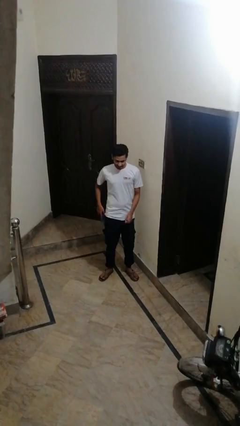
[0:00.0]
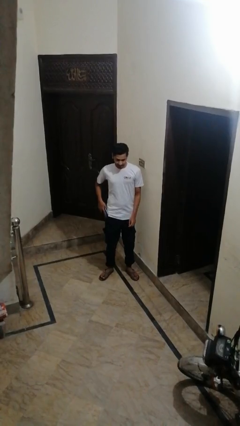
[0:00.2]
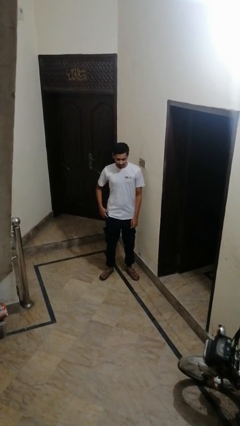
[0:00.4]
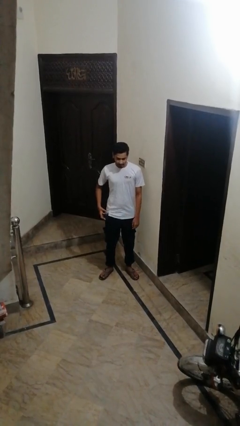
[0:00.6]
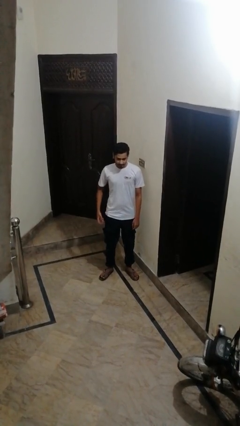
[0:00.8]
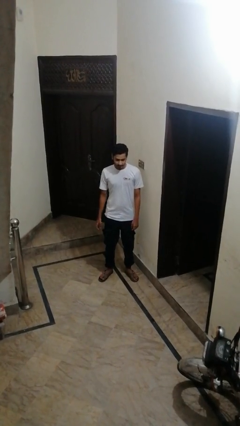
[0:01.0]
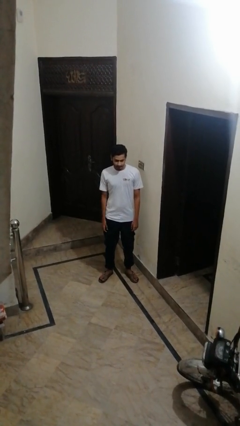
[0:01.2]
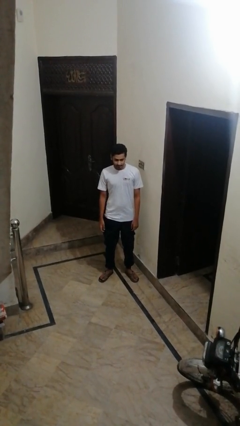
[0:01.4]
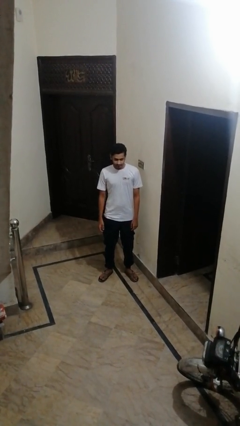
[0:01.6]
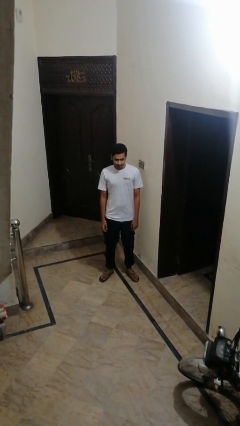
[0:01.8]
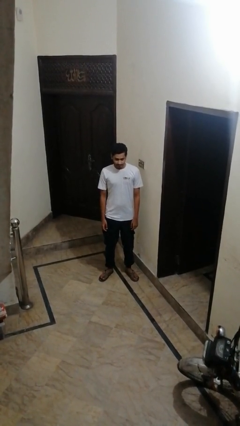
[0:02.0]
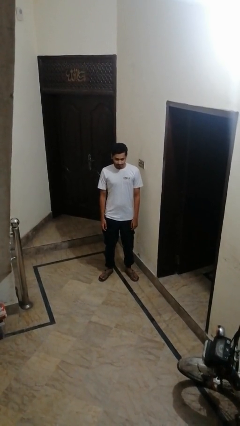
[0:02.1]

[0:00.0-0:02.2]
person shoves person

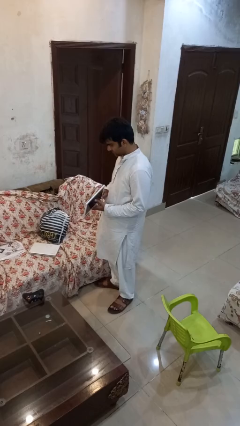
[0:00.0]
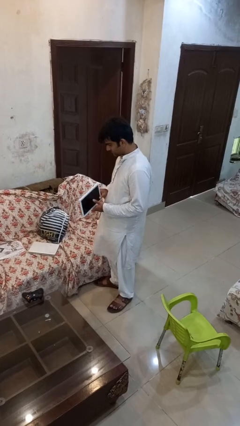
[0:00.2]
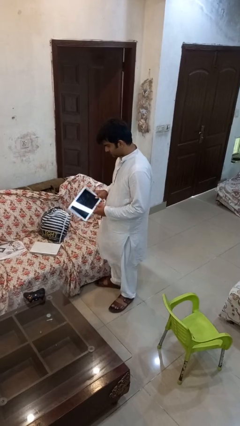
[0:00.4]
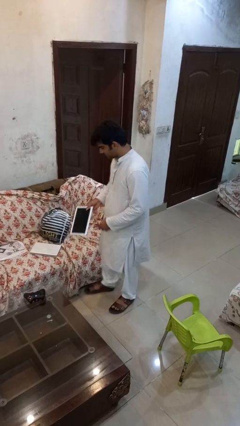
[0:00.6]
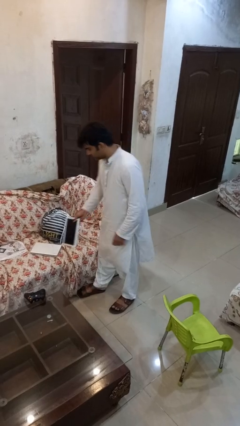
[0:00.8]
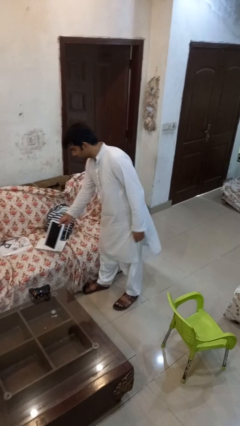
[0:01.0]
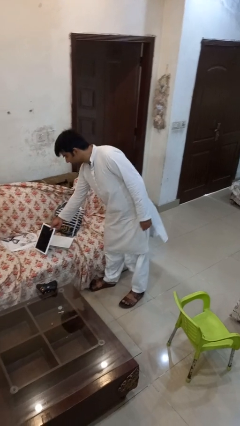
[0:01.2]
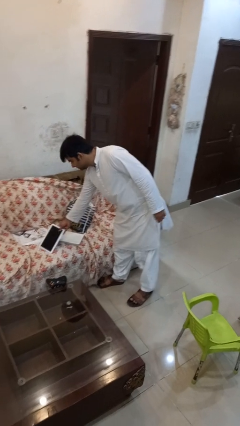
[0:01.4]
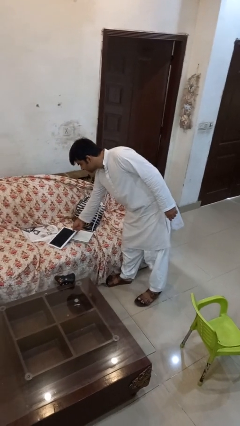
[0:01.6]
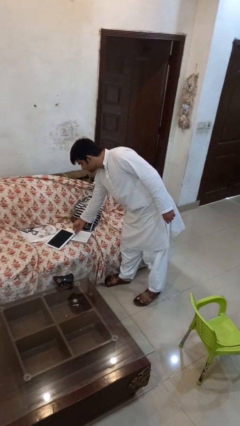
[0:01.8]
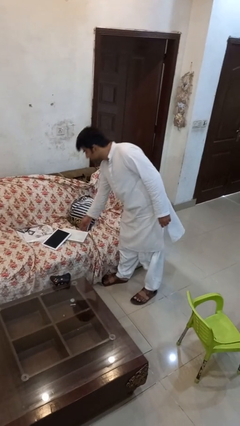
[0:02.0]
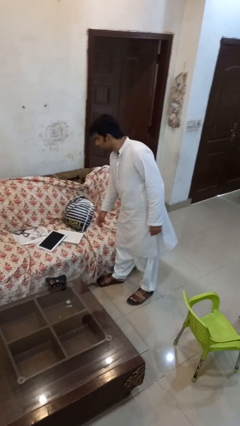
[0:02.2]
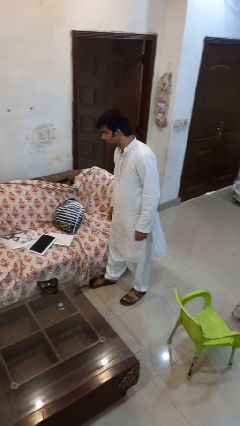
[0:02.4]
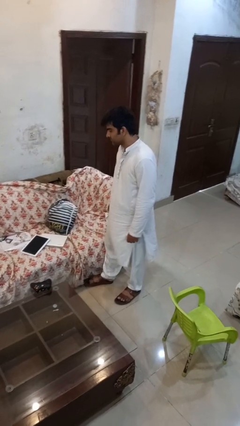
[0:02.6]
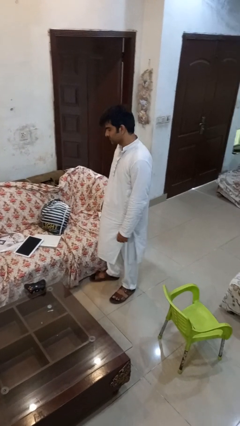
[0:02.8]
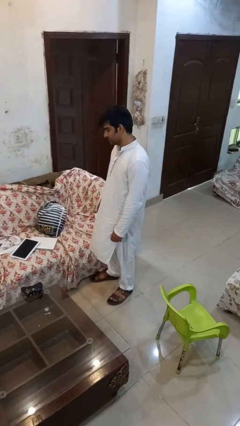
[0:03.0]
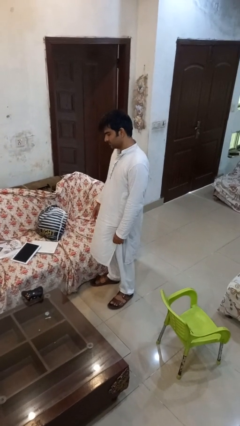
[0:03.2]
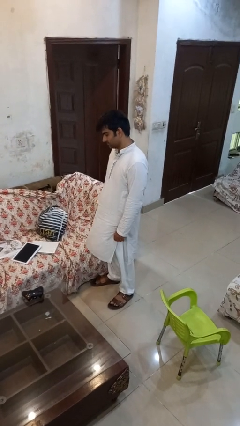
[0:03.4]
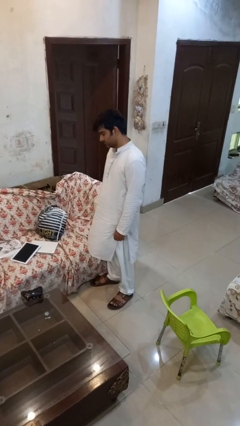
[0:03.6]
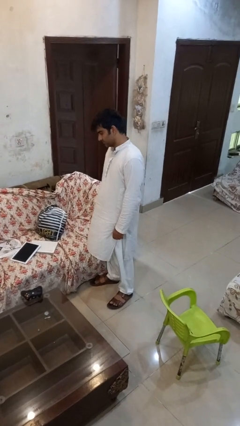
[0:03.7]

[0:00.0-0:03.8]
person puts down object on couch

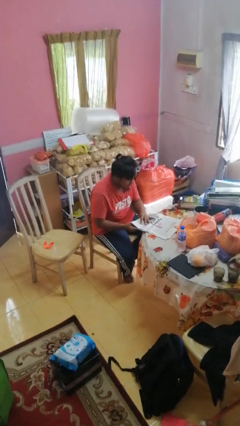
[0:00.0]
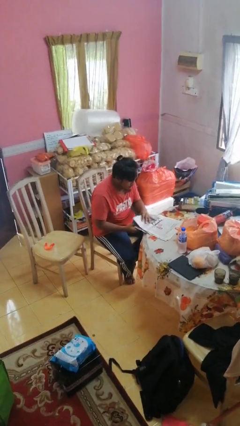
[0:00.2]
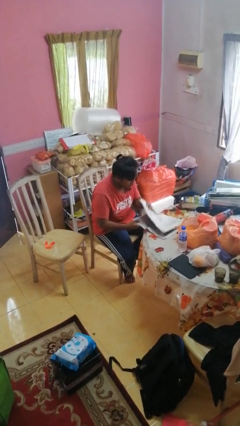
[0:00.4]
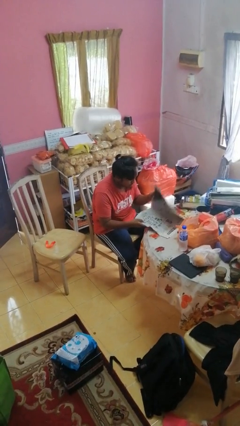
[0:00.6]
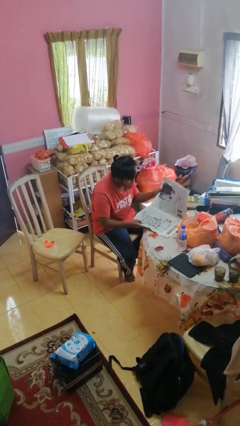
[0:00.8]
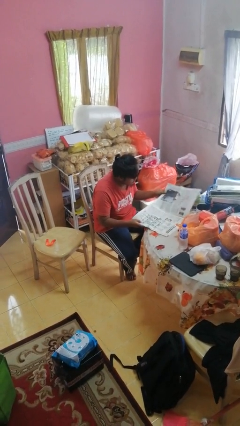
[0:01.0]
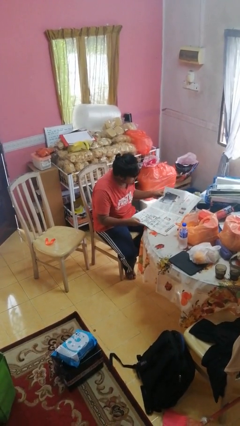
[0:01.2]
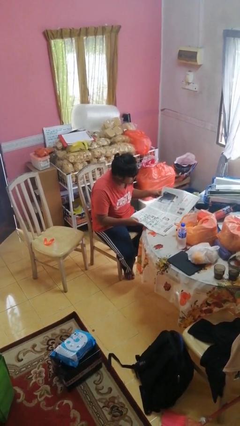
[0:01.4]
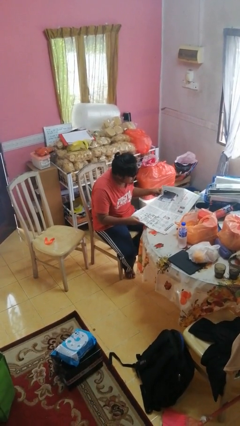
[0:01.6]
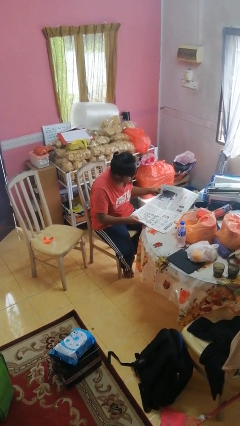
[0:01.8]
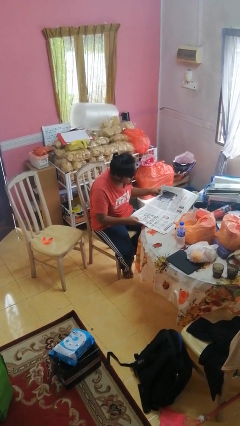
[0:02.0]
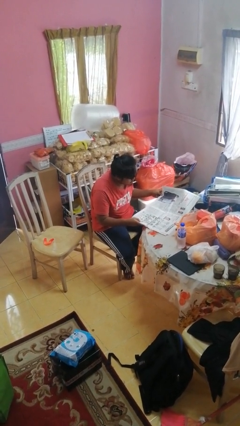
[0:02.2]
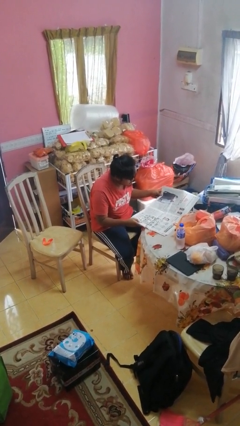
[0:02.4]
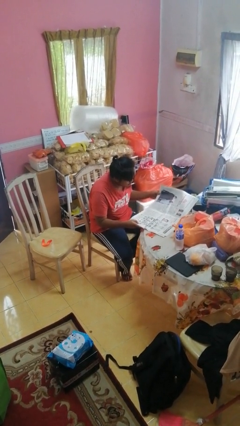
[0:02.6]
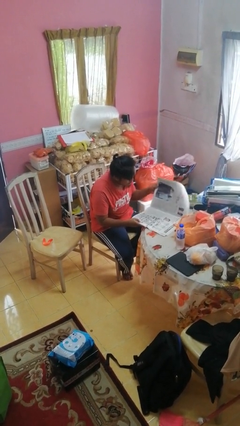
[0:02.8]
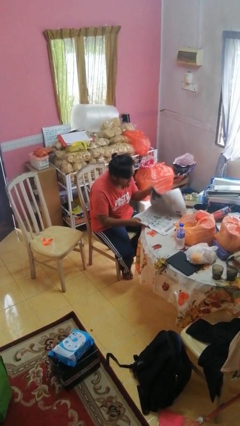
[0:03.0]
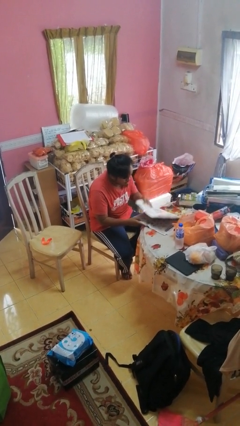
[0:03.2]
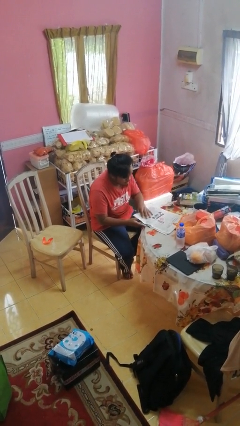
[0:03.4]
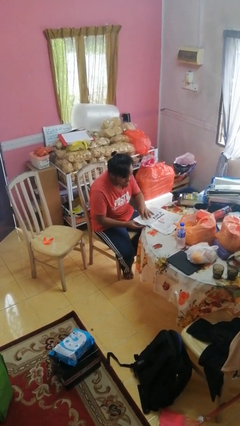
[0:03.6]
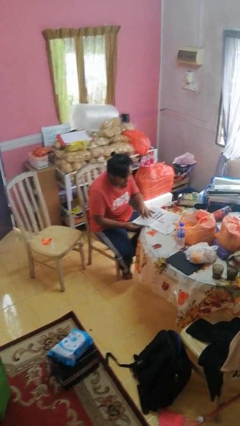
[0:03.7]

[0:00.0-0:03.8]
person reads newspaper

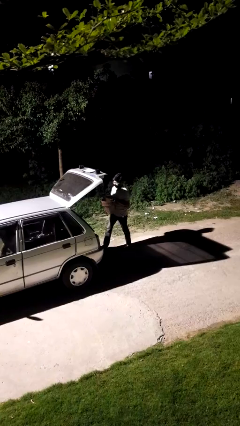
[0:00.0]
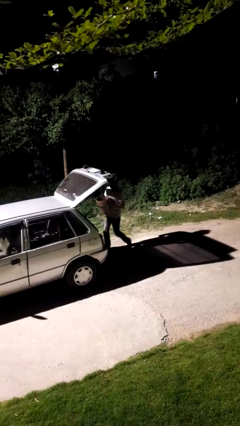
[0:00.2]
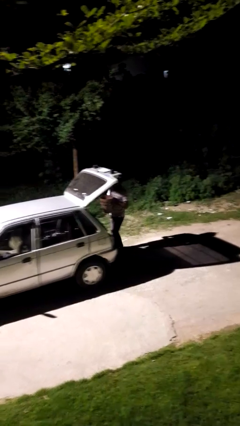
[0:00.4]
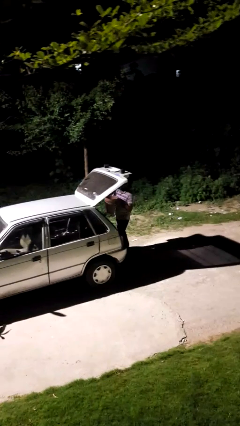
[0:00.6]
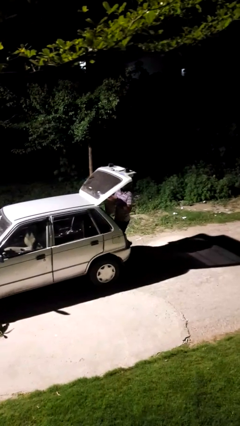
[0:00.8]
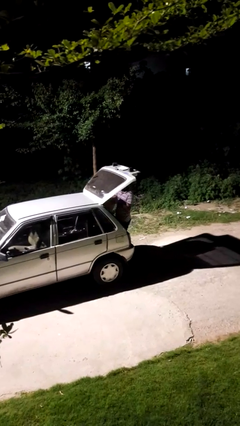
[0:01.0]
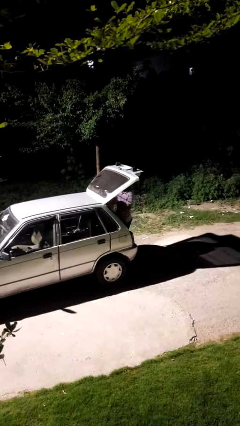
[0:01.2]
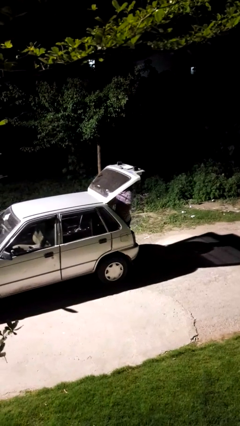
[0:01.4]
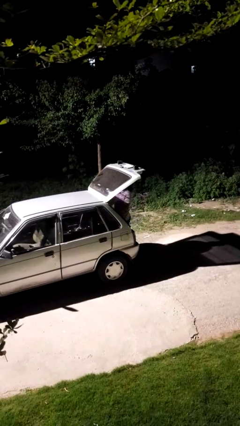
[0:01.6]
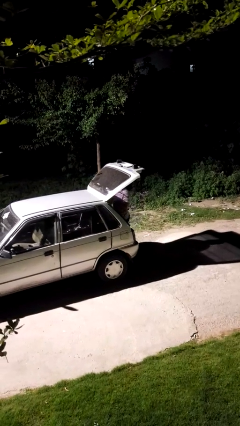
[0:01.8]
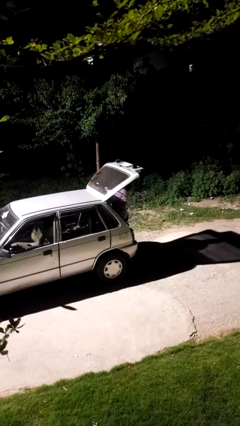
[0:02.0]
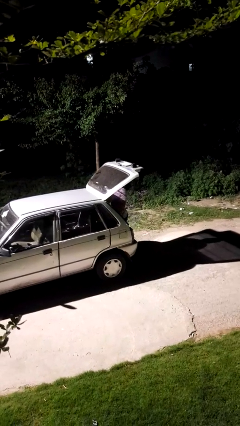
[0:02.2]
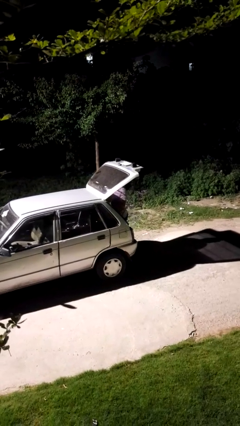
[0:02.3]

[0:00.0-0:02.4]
person loads car

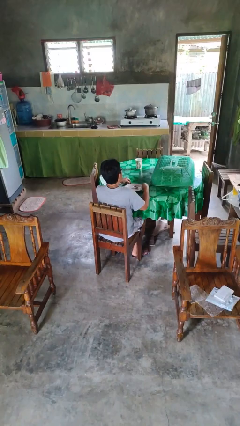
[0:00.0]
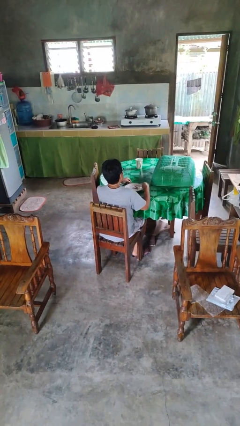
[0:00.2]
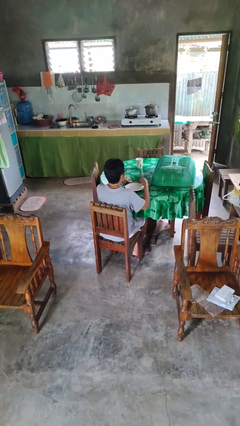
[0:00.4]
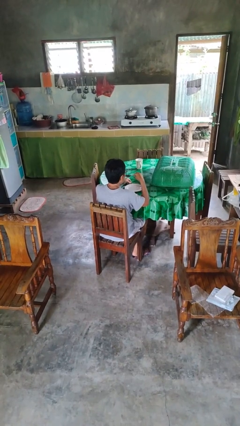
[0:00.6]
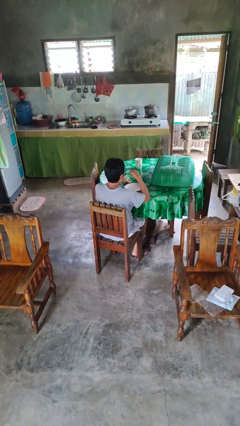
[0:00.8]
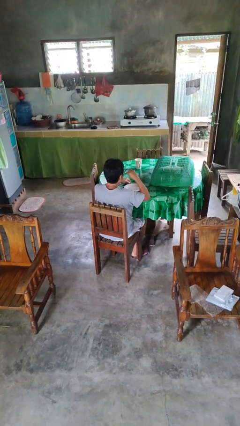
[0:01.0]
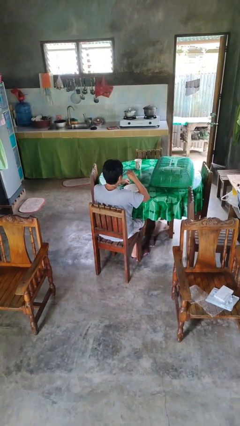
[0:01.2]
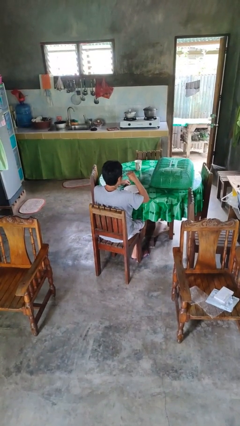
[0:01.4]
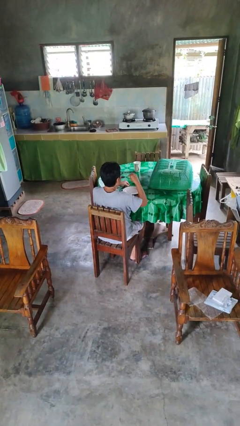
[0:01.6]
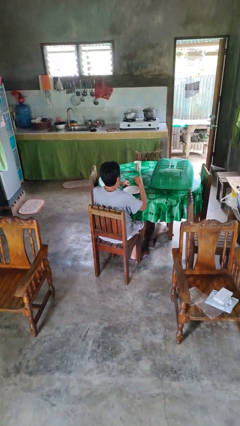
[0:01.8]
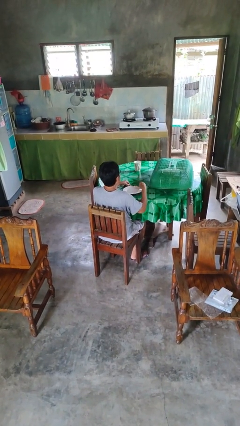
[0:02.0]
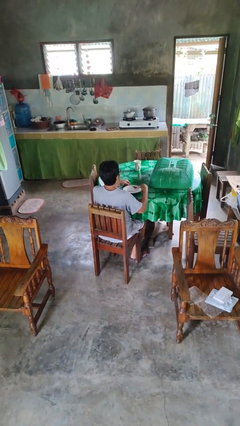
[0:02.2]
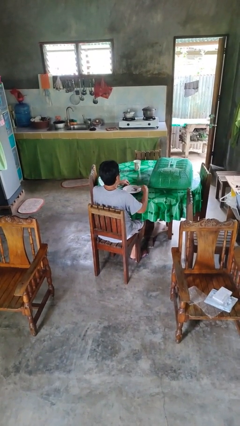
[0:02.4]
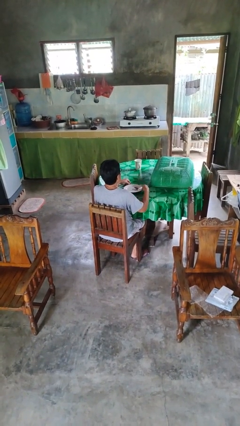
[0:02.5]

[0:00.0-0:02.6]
person eats with utensil

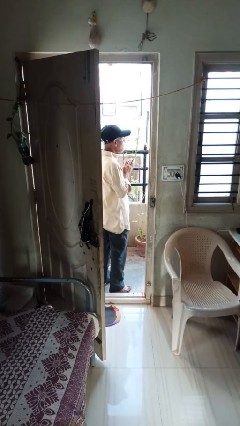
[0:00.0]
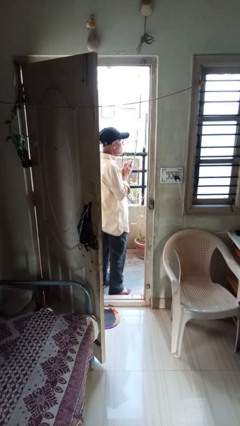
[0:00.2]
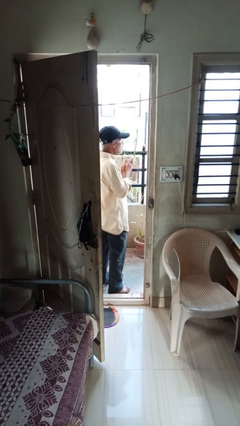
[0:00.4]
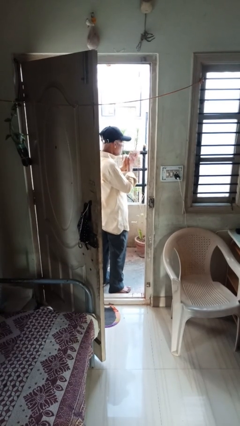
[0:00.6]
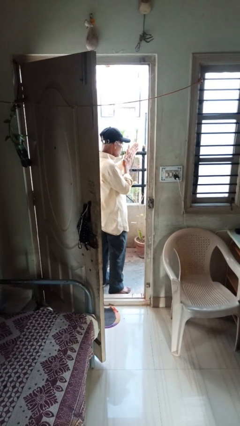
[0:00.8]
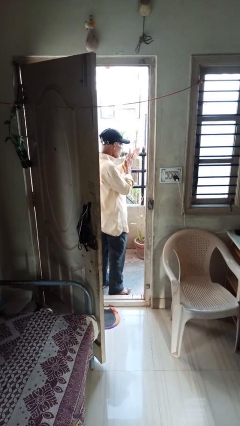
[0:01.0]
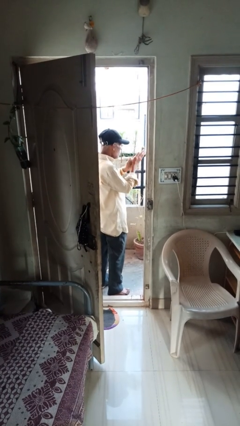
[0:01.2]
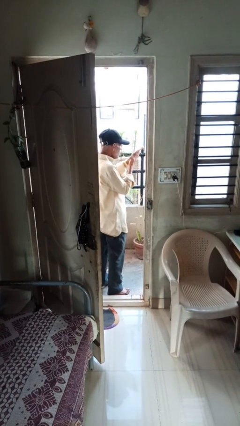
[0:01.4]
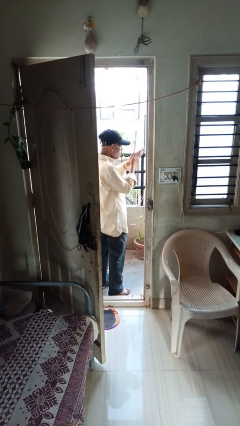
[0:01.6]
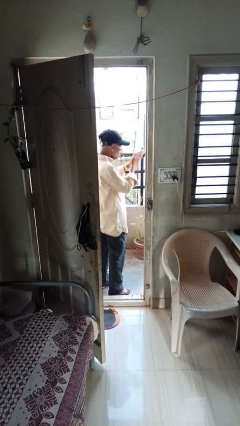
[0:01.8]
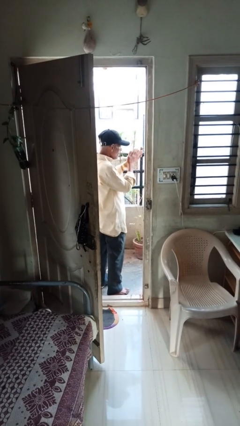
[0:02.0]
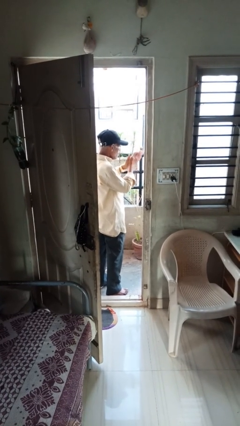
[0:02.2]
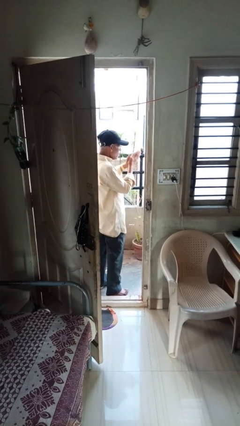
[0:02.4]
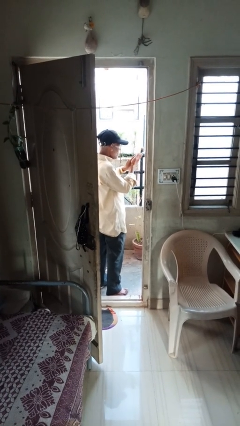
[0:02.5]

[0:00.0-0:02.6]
person blows into hands

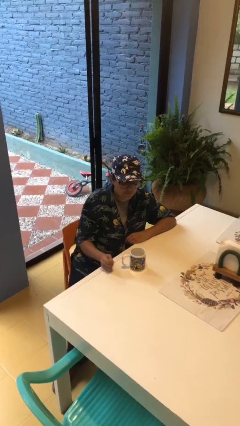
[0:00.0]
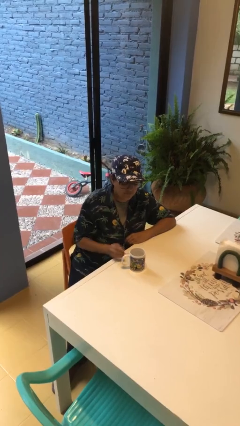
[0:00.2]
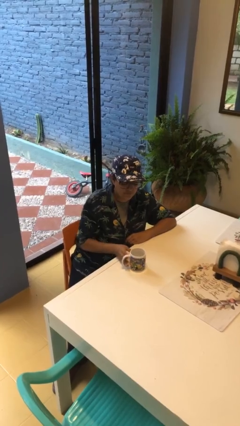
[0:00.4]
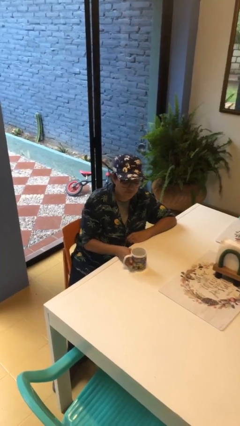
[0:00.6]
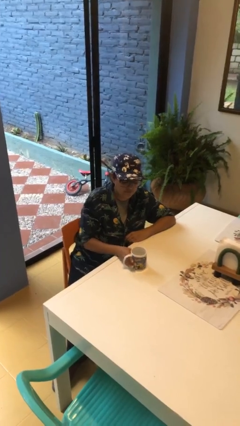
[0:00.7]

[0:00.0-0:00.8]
person picks up object from table
